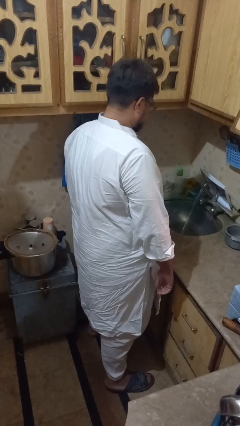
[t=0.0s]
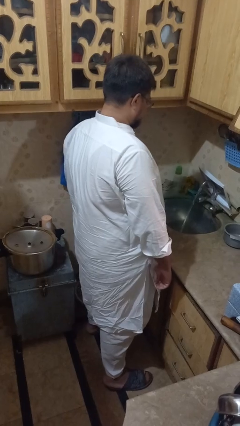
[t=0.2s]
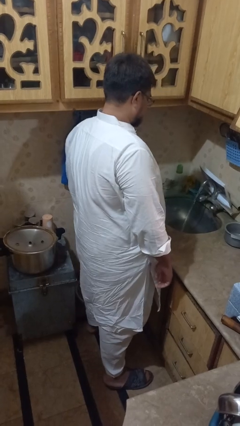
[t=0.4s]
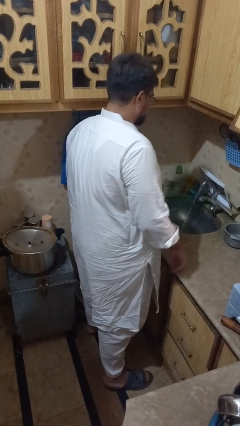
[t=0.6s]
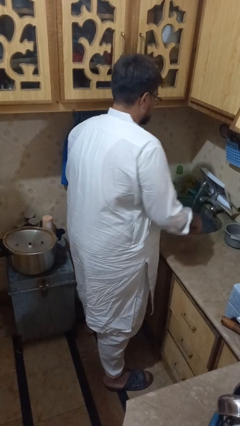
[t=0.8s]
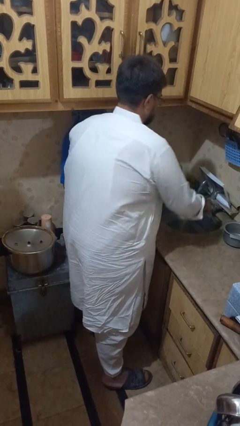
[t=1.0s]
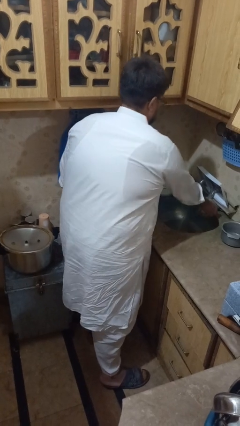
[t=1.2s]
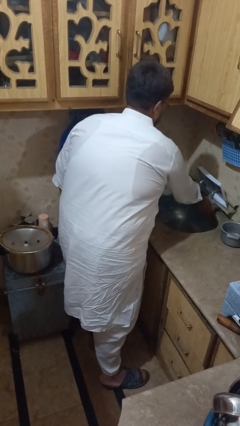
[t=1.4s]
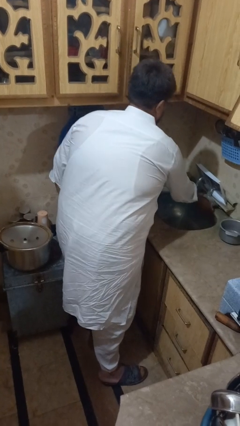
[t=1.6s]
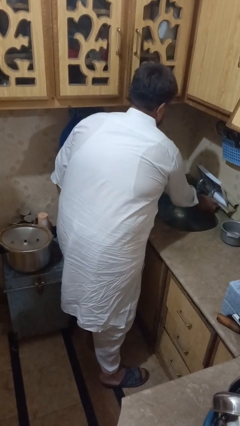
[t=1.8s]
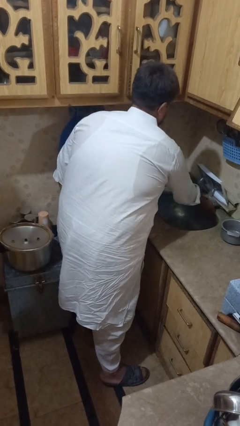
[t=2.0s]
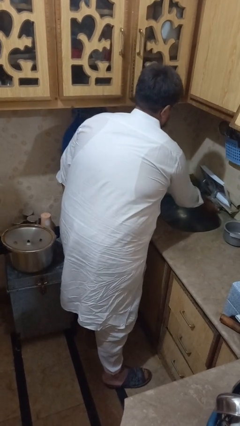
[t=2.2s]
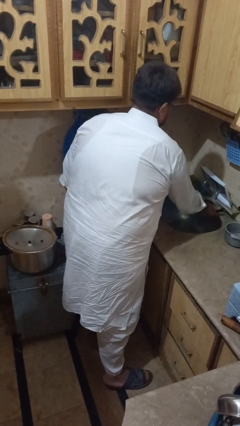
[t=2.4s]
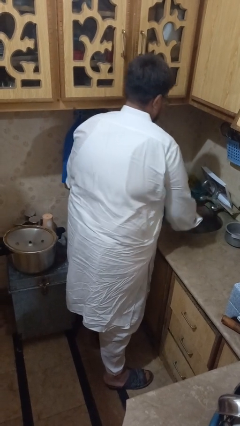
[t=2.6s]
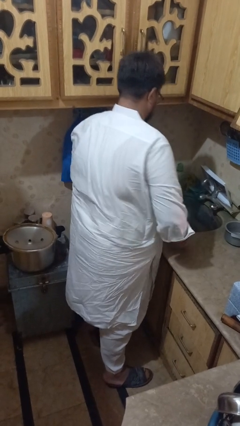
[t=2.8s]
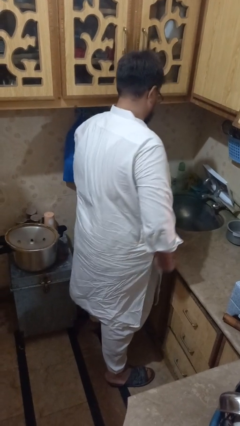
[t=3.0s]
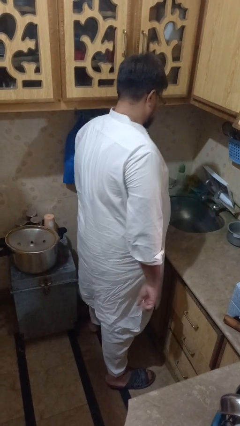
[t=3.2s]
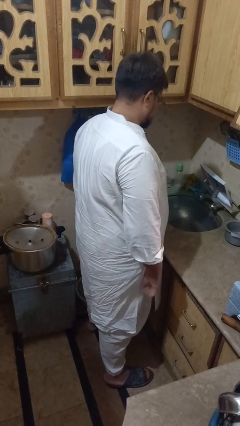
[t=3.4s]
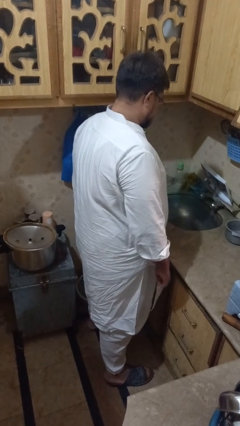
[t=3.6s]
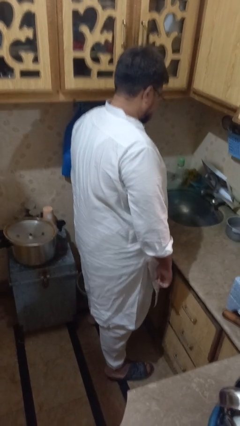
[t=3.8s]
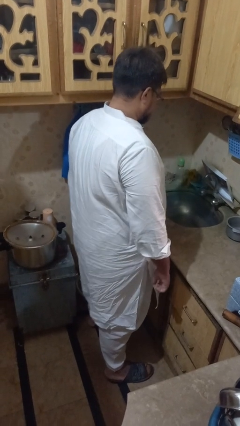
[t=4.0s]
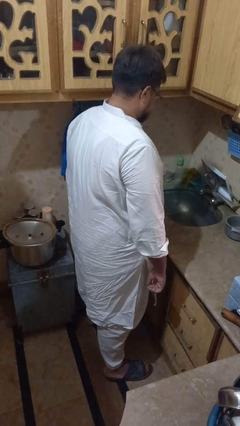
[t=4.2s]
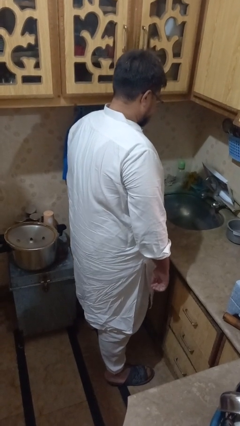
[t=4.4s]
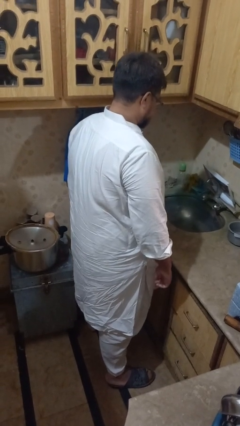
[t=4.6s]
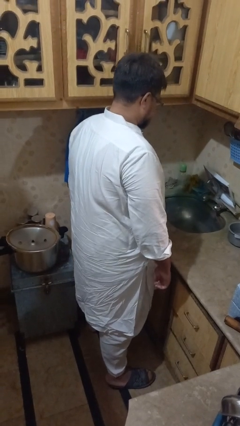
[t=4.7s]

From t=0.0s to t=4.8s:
person turns off faucet

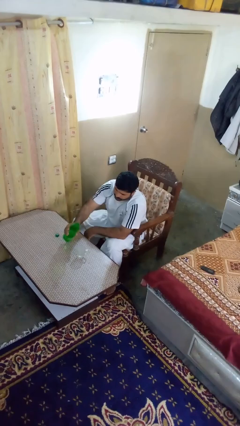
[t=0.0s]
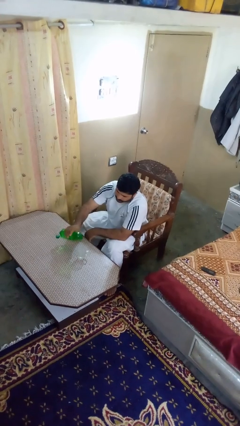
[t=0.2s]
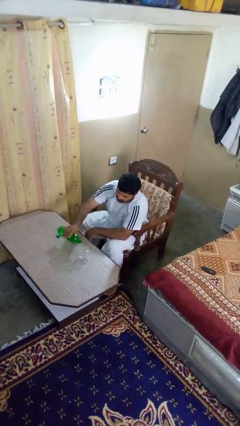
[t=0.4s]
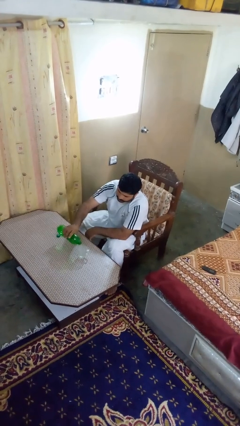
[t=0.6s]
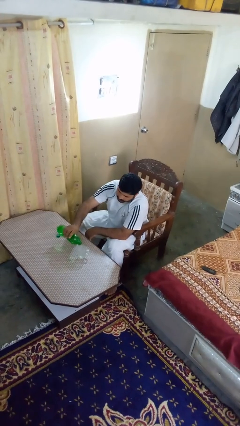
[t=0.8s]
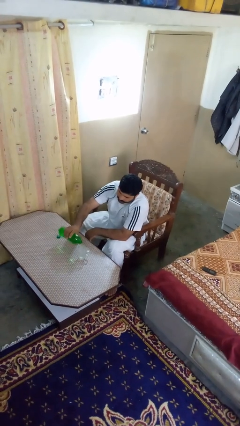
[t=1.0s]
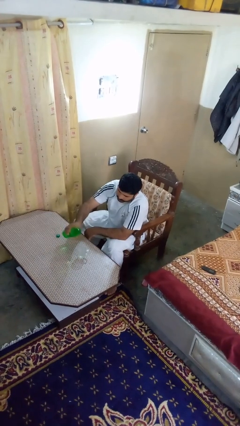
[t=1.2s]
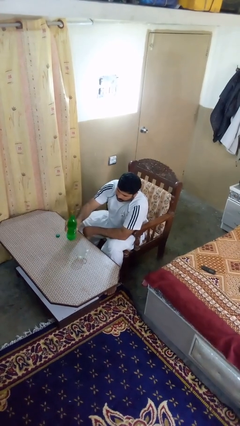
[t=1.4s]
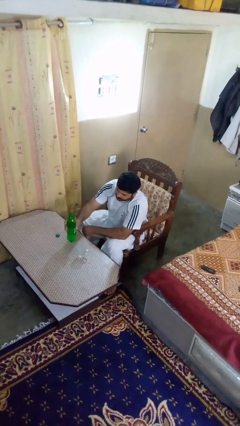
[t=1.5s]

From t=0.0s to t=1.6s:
person pours liquid into cup

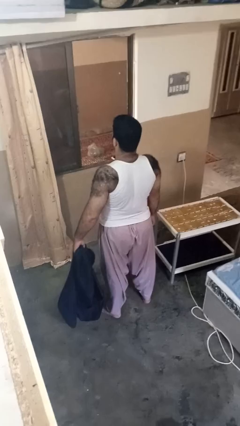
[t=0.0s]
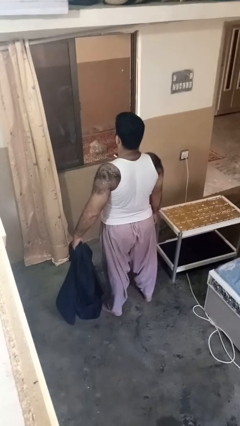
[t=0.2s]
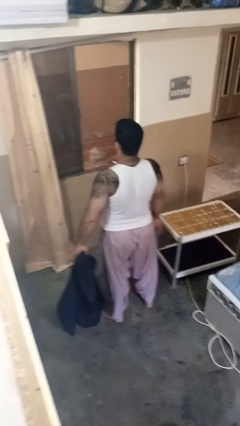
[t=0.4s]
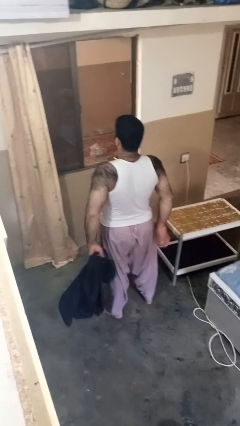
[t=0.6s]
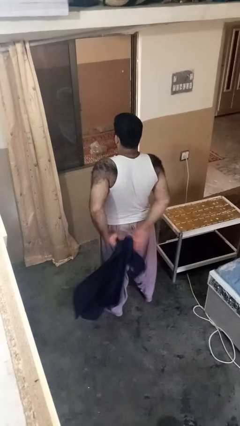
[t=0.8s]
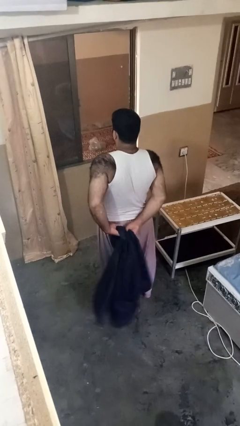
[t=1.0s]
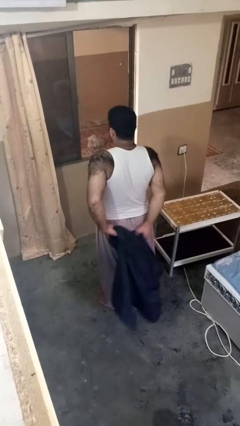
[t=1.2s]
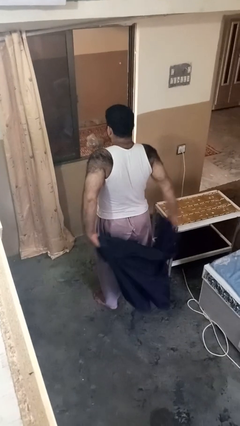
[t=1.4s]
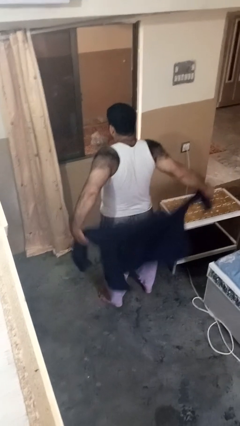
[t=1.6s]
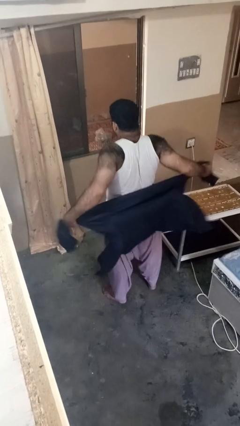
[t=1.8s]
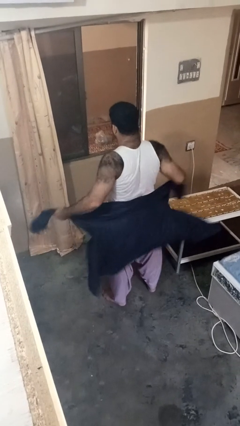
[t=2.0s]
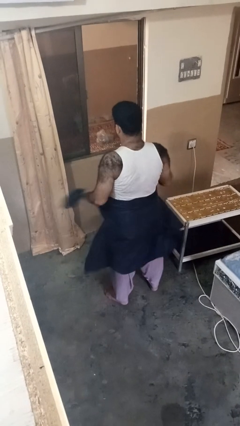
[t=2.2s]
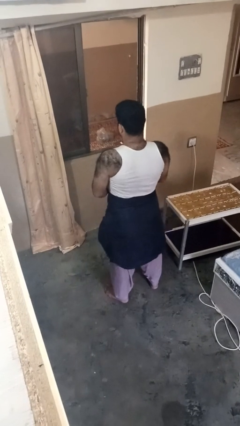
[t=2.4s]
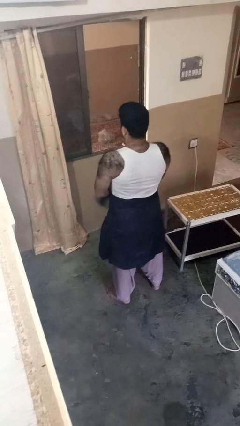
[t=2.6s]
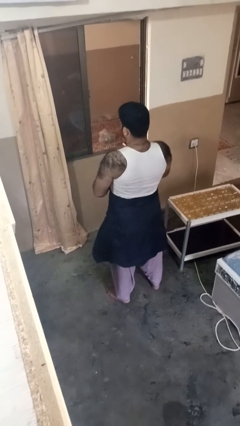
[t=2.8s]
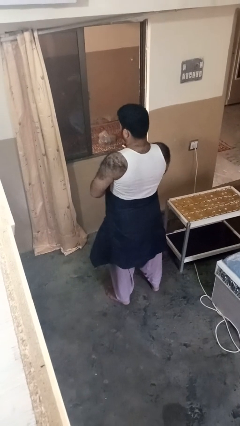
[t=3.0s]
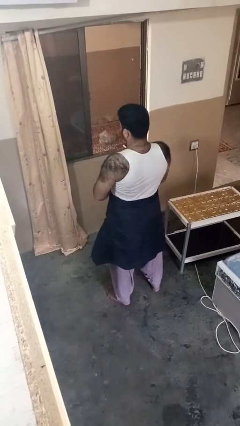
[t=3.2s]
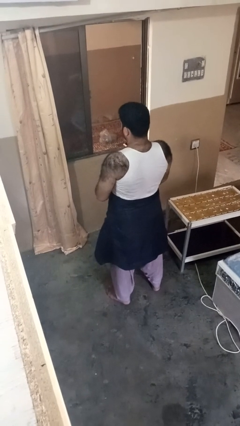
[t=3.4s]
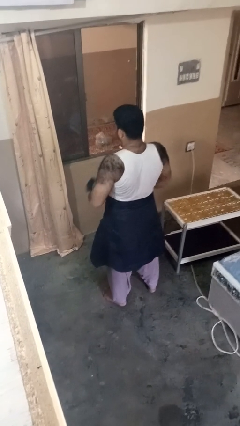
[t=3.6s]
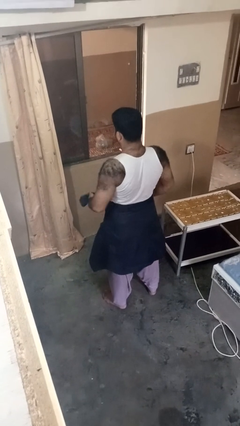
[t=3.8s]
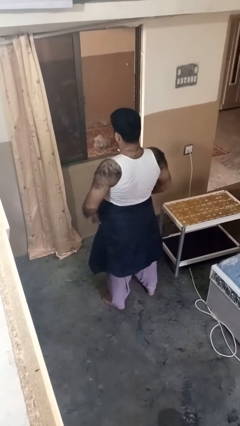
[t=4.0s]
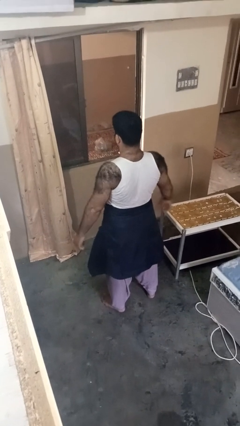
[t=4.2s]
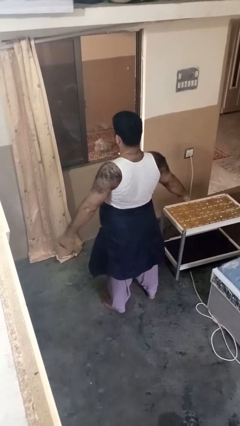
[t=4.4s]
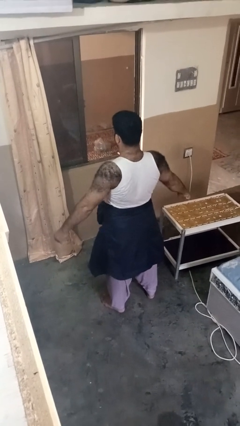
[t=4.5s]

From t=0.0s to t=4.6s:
person ties jacket around waist

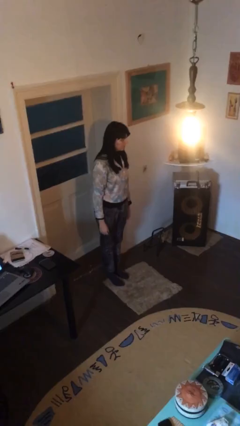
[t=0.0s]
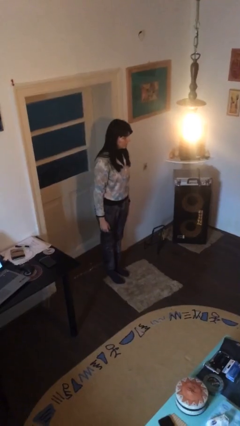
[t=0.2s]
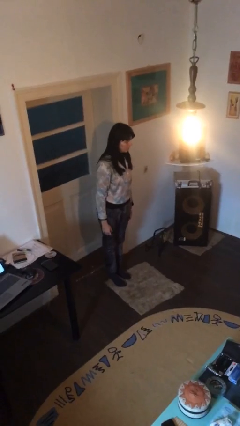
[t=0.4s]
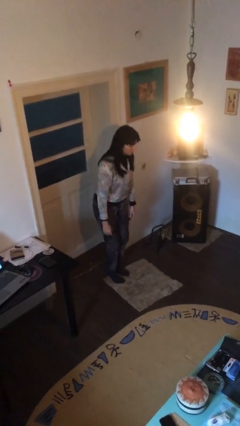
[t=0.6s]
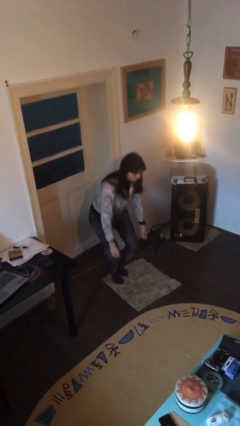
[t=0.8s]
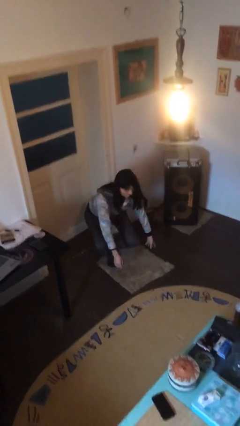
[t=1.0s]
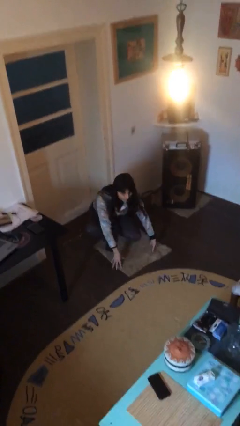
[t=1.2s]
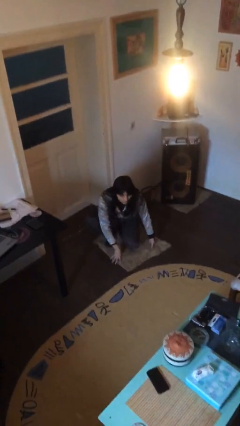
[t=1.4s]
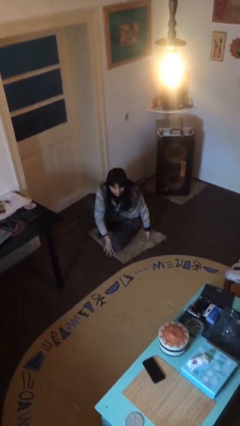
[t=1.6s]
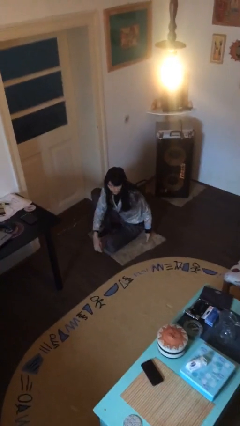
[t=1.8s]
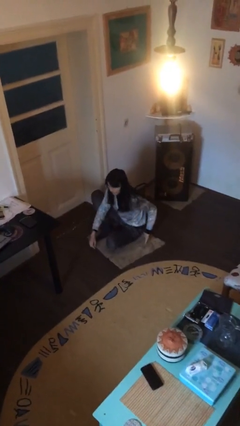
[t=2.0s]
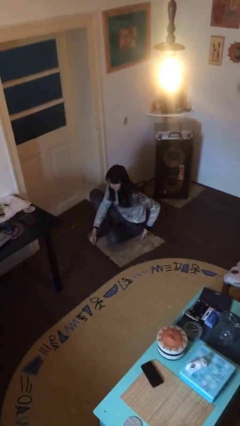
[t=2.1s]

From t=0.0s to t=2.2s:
person sits down

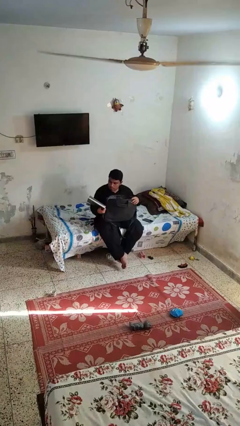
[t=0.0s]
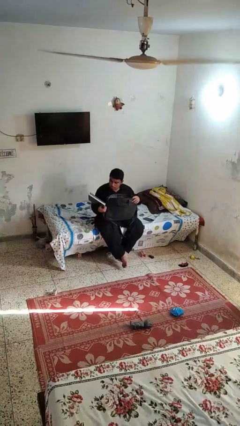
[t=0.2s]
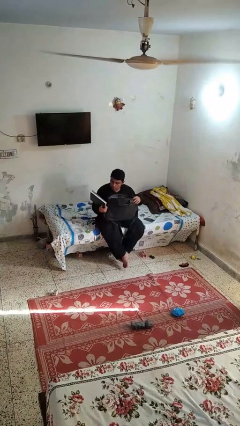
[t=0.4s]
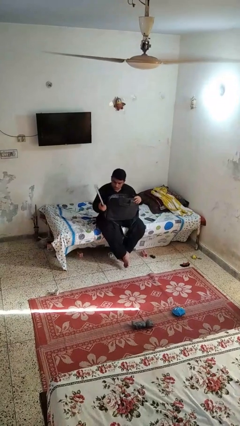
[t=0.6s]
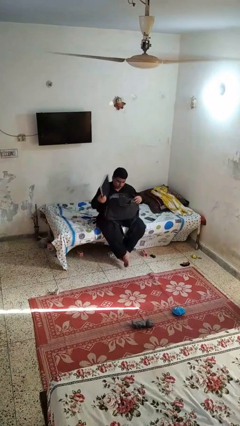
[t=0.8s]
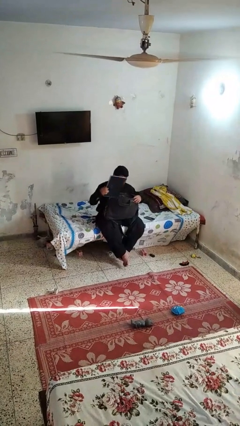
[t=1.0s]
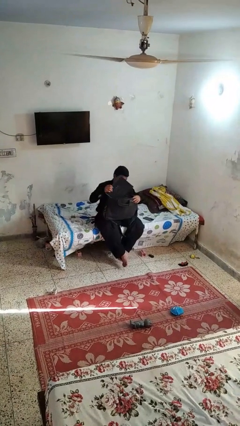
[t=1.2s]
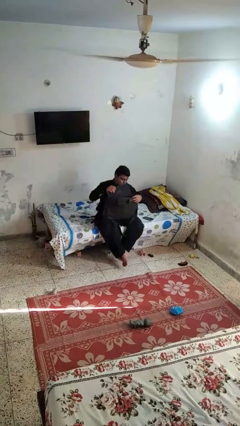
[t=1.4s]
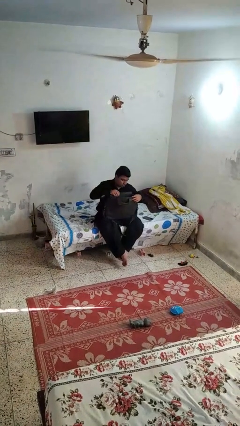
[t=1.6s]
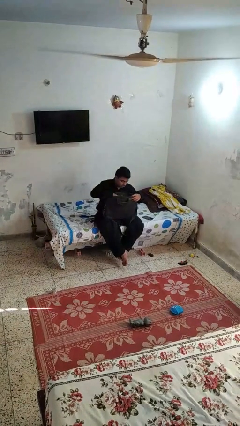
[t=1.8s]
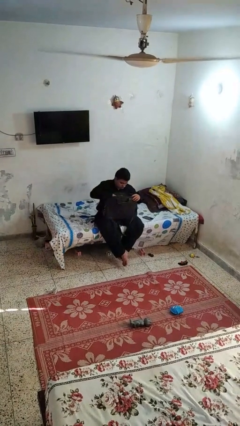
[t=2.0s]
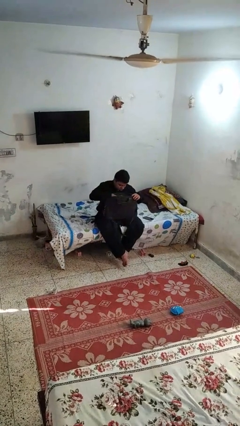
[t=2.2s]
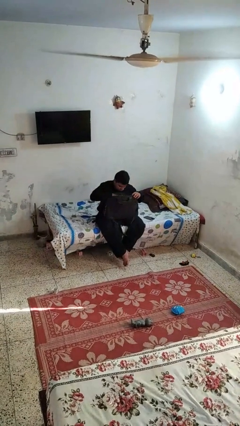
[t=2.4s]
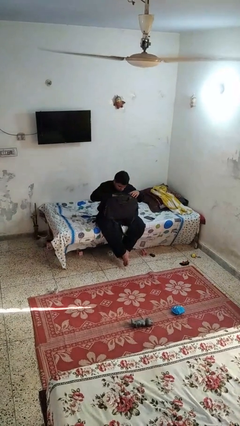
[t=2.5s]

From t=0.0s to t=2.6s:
person puts object into backpack

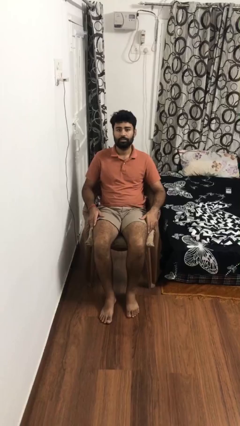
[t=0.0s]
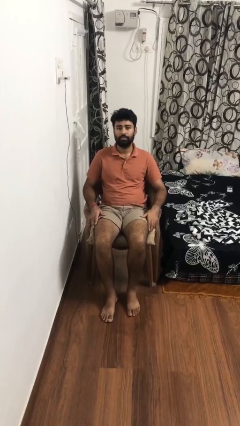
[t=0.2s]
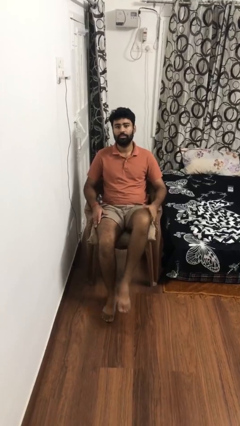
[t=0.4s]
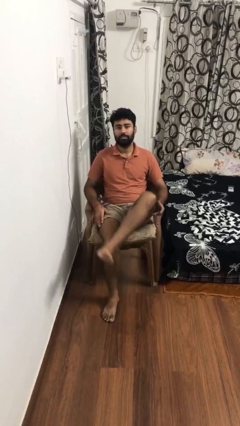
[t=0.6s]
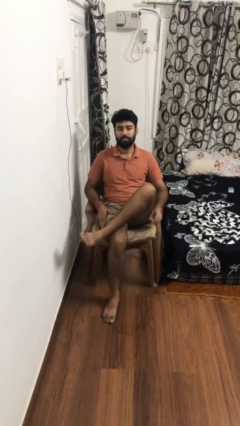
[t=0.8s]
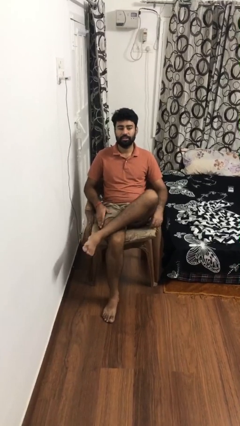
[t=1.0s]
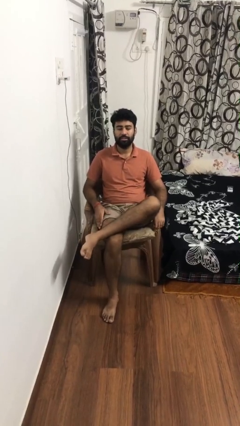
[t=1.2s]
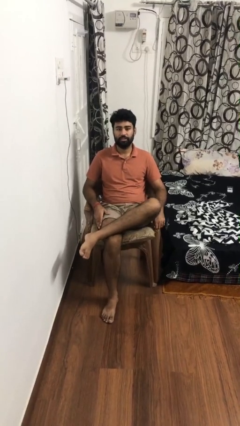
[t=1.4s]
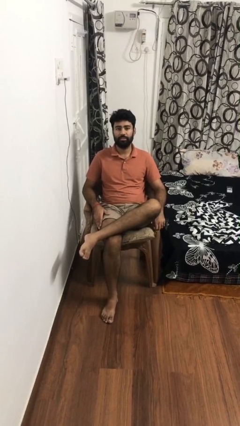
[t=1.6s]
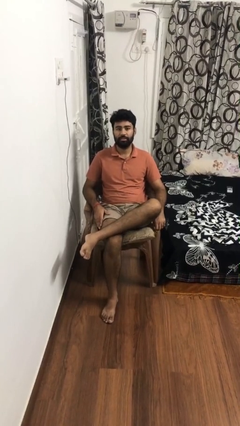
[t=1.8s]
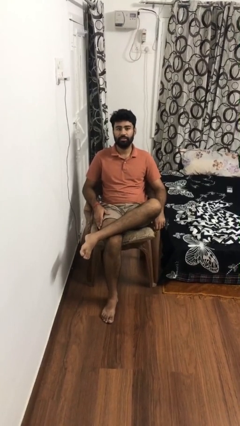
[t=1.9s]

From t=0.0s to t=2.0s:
person crosses legs
